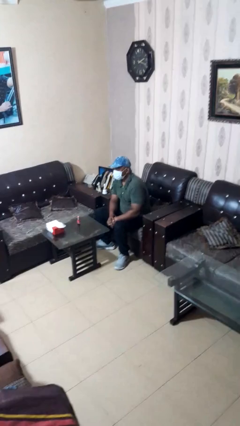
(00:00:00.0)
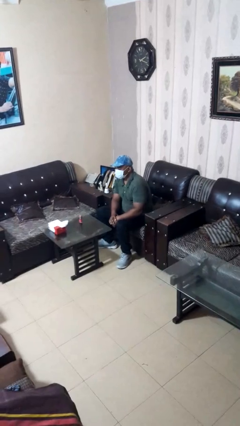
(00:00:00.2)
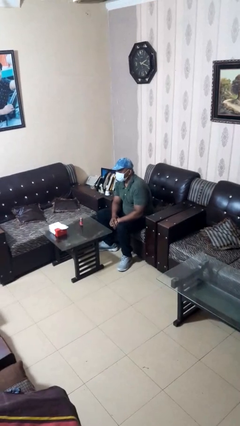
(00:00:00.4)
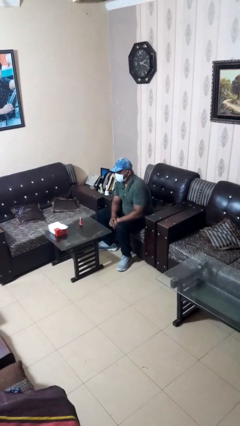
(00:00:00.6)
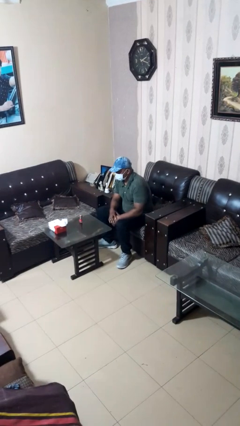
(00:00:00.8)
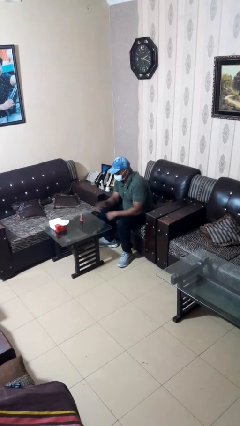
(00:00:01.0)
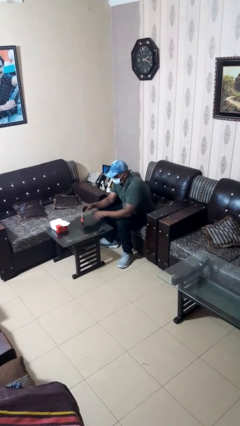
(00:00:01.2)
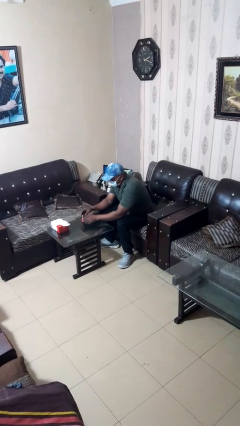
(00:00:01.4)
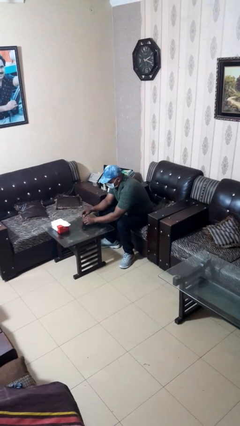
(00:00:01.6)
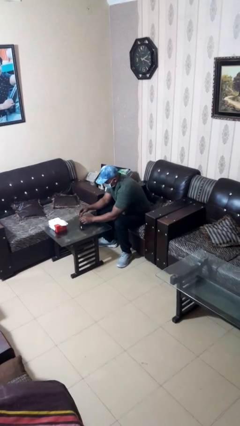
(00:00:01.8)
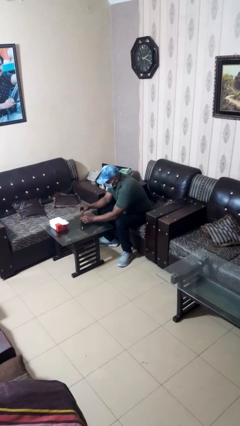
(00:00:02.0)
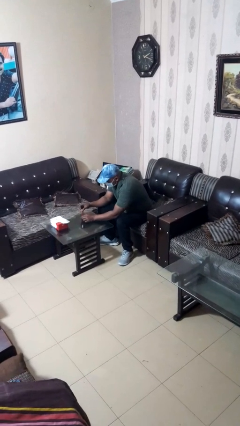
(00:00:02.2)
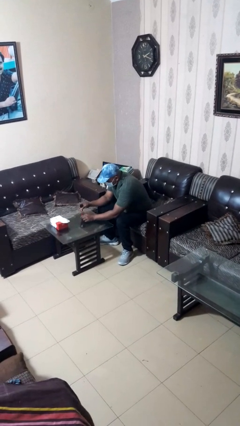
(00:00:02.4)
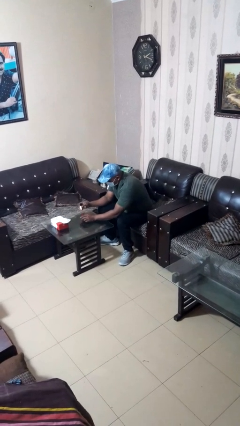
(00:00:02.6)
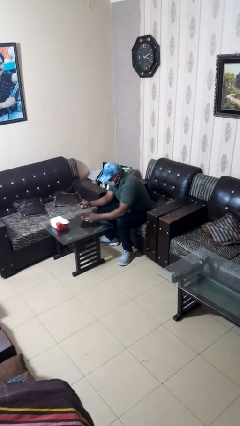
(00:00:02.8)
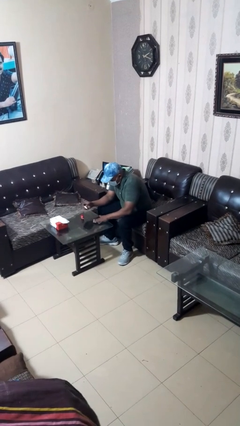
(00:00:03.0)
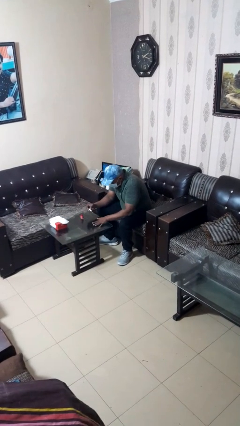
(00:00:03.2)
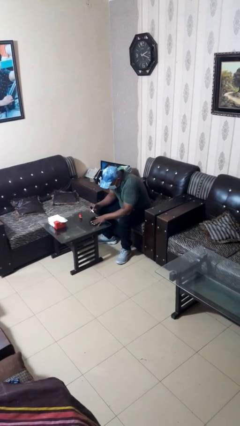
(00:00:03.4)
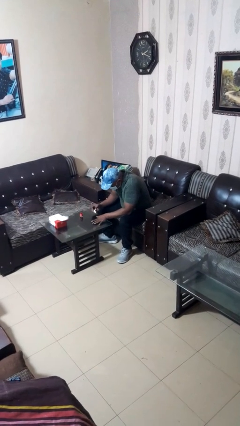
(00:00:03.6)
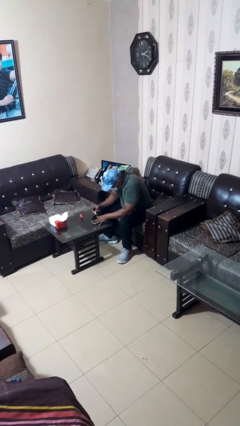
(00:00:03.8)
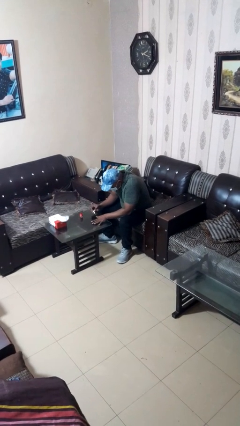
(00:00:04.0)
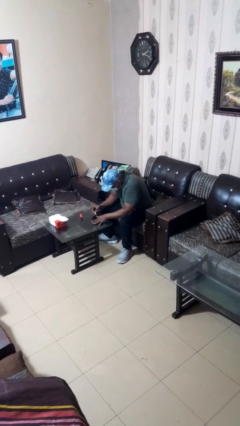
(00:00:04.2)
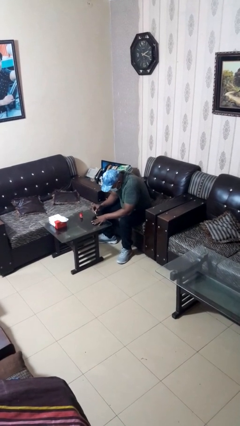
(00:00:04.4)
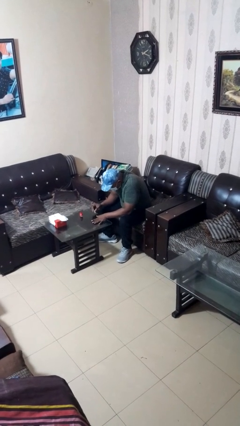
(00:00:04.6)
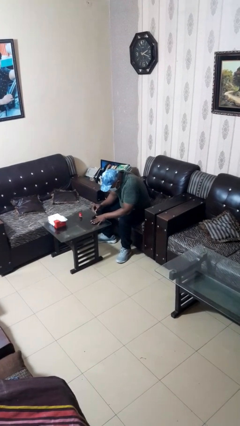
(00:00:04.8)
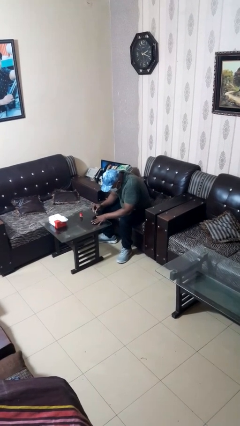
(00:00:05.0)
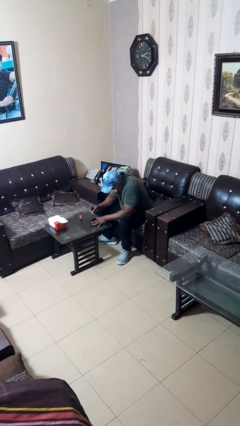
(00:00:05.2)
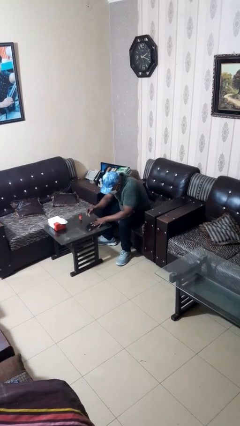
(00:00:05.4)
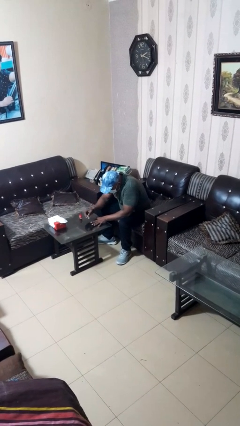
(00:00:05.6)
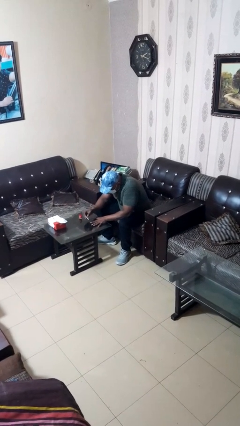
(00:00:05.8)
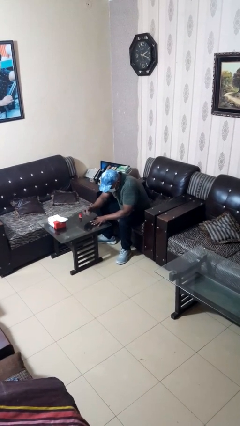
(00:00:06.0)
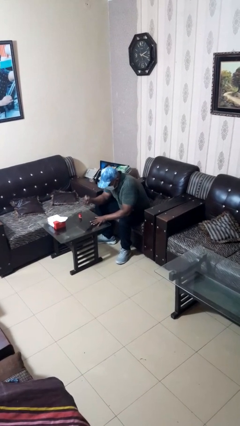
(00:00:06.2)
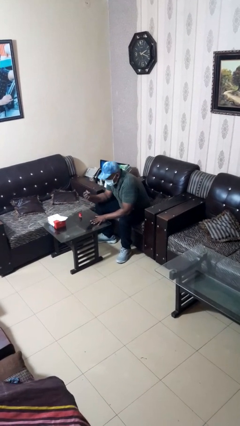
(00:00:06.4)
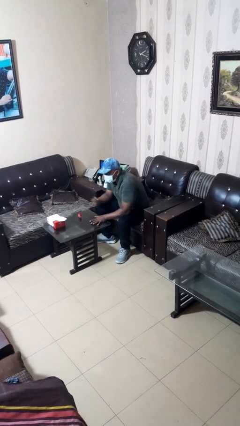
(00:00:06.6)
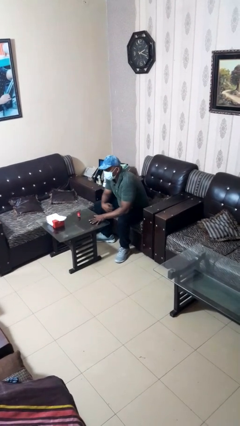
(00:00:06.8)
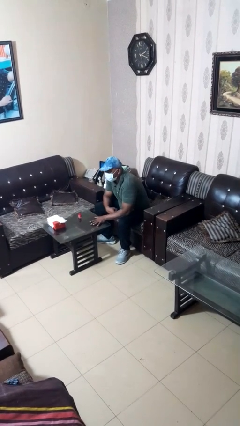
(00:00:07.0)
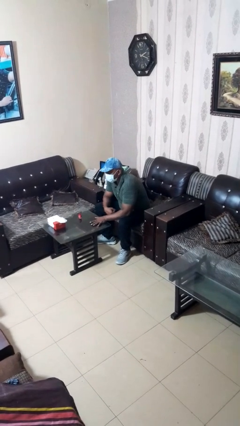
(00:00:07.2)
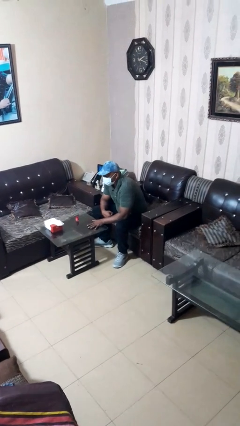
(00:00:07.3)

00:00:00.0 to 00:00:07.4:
person paints fingernails

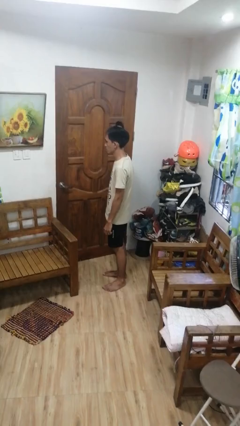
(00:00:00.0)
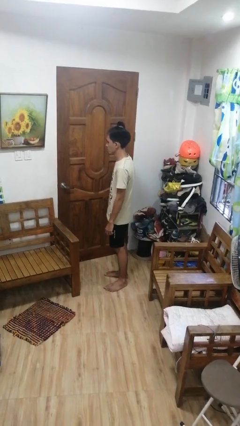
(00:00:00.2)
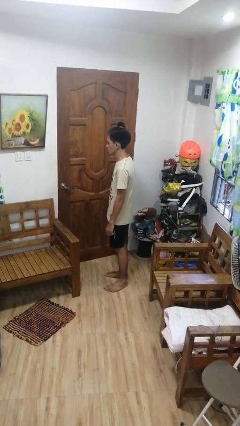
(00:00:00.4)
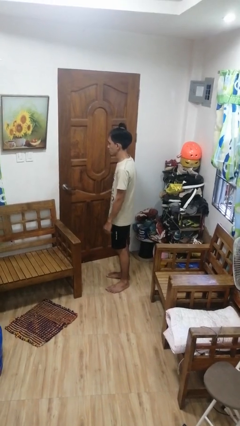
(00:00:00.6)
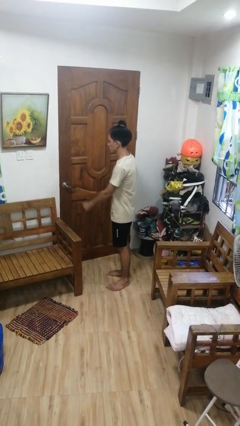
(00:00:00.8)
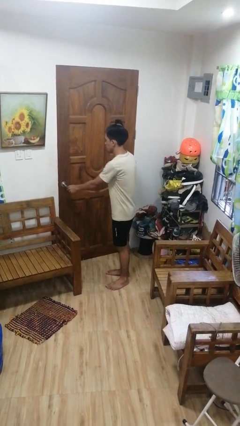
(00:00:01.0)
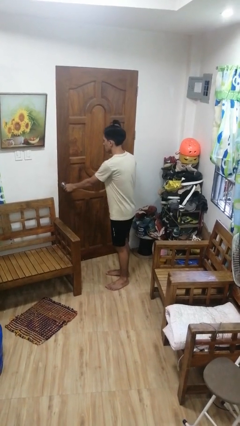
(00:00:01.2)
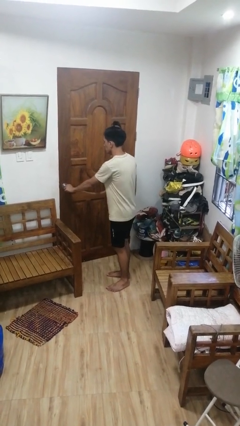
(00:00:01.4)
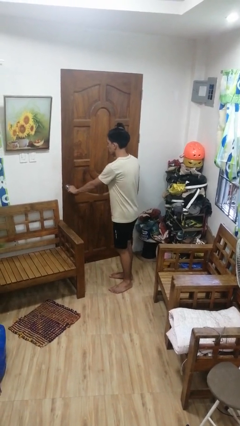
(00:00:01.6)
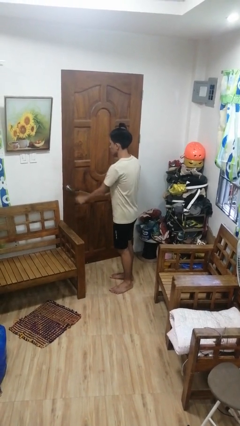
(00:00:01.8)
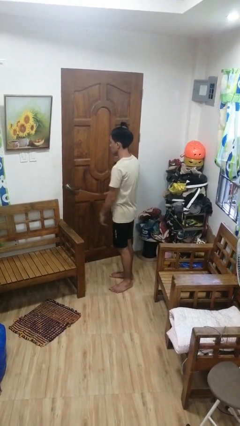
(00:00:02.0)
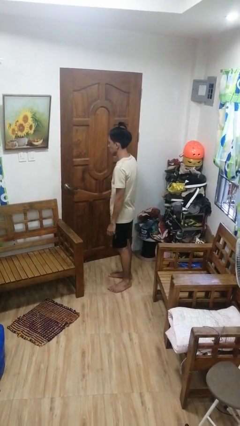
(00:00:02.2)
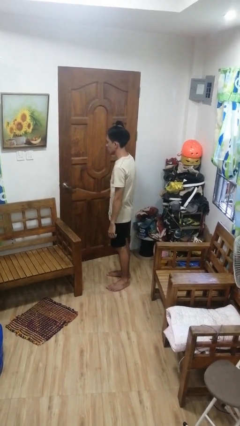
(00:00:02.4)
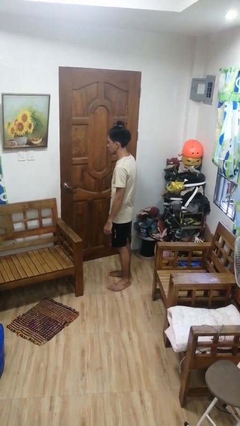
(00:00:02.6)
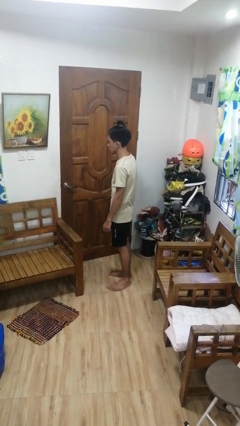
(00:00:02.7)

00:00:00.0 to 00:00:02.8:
person unlocks door with keys

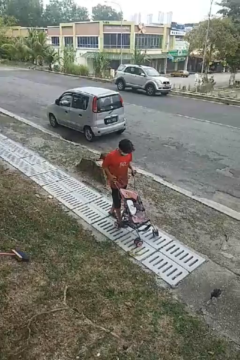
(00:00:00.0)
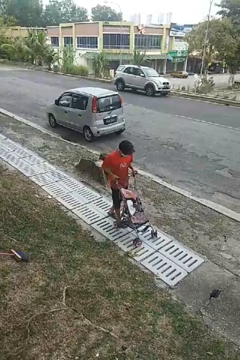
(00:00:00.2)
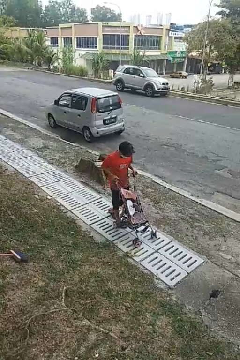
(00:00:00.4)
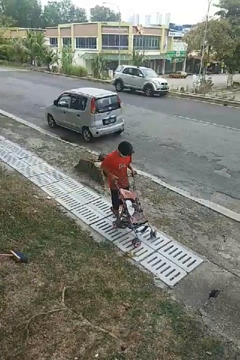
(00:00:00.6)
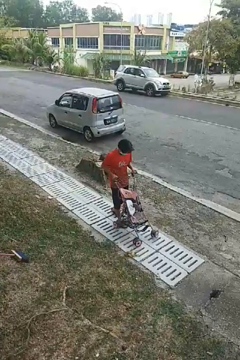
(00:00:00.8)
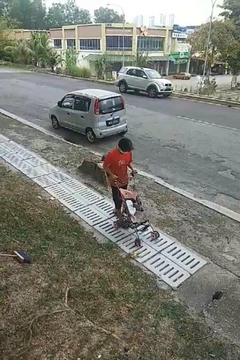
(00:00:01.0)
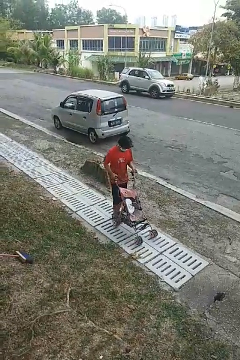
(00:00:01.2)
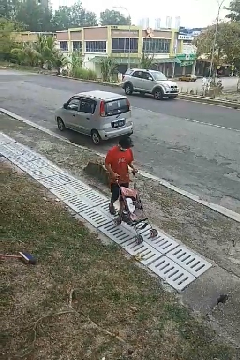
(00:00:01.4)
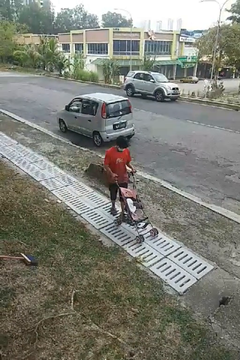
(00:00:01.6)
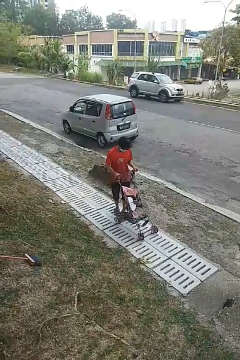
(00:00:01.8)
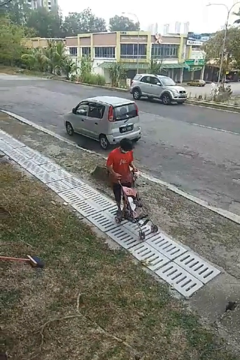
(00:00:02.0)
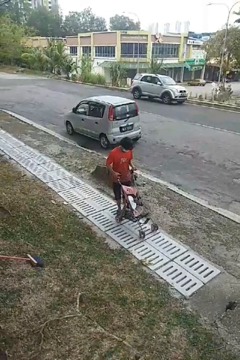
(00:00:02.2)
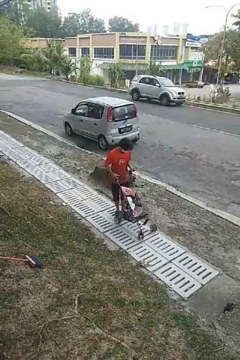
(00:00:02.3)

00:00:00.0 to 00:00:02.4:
person pulls wheeled cart

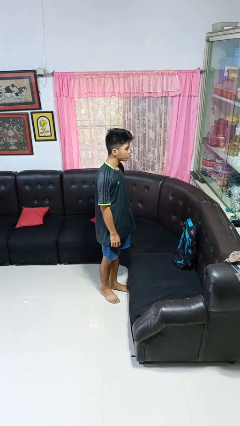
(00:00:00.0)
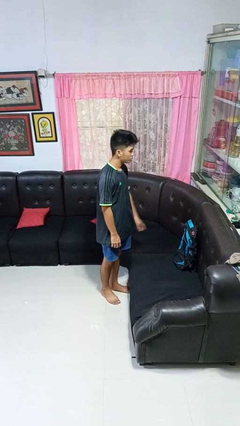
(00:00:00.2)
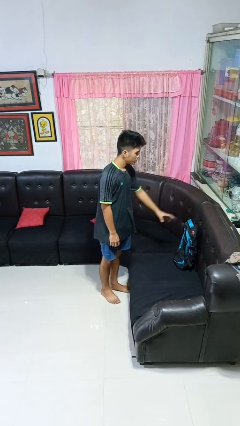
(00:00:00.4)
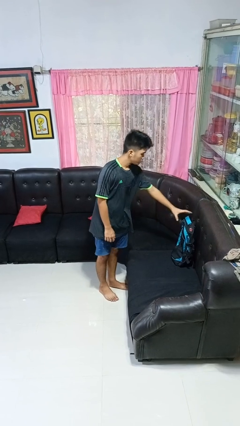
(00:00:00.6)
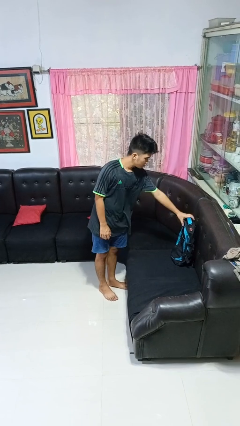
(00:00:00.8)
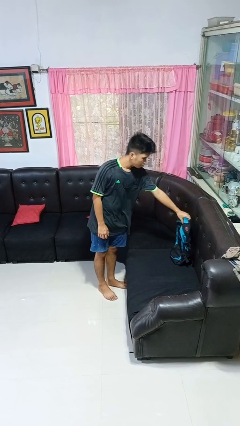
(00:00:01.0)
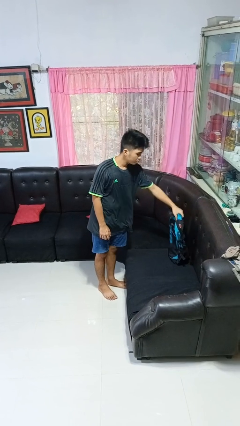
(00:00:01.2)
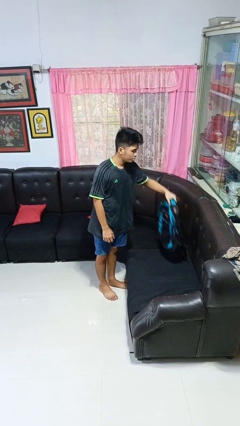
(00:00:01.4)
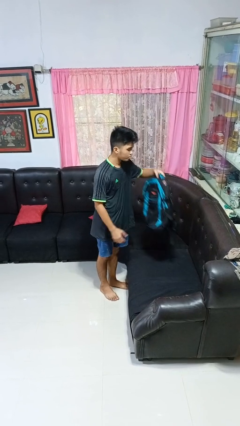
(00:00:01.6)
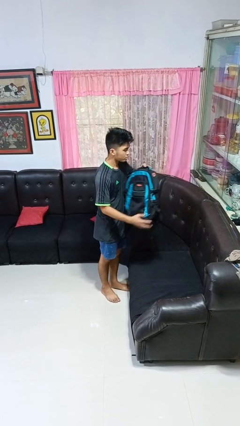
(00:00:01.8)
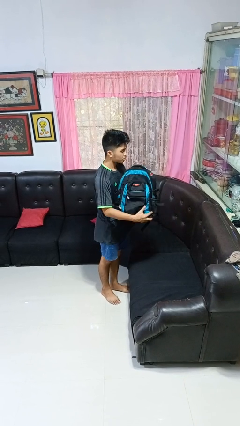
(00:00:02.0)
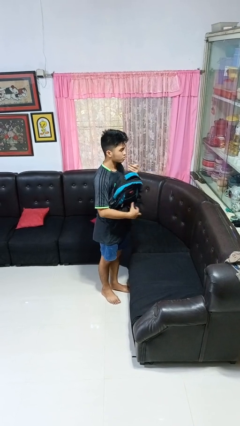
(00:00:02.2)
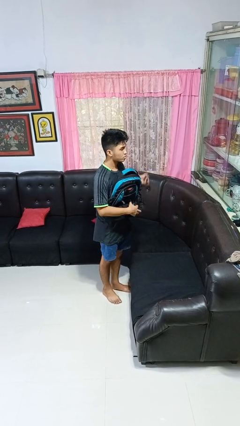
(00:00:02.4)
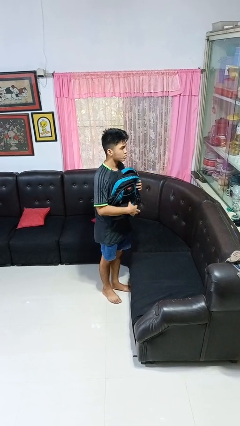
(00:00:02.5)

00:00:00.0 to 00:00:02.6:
person picks up object from couch

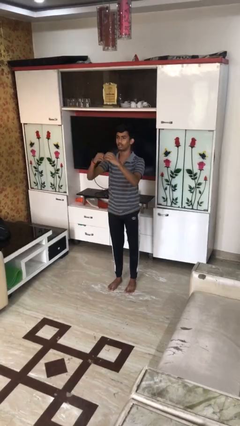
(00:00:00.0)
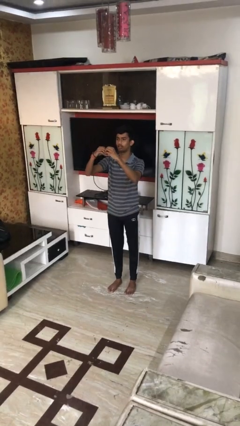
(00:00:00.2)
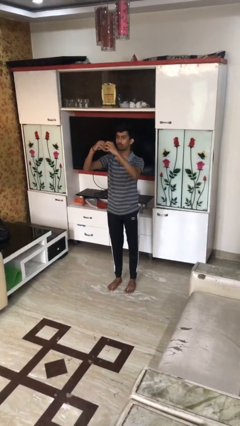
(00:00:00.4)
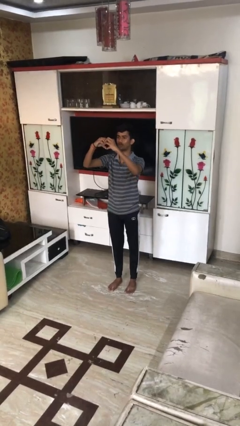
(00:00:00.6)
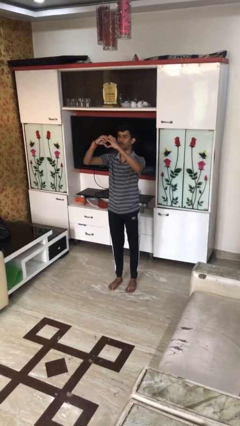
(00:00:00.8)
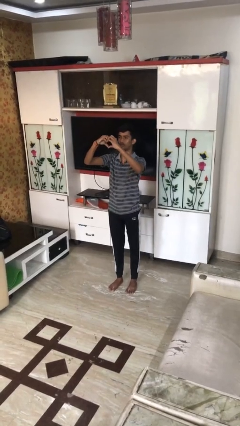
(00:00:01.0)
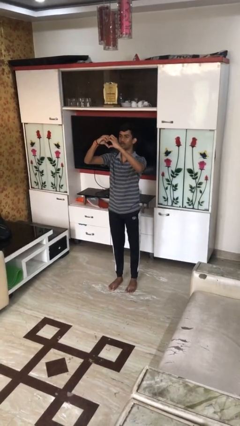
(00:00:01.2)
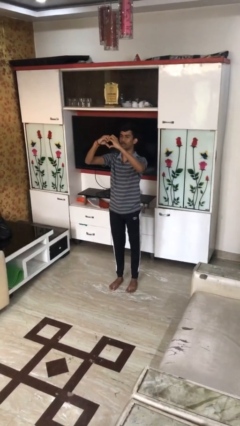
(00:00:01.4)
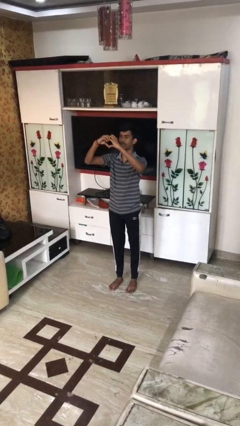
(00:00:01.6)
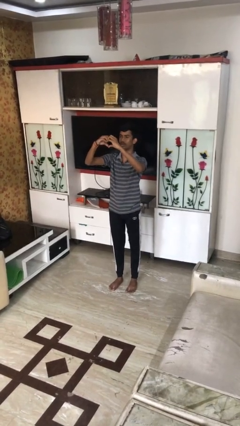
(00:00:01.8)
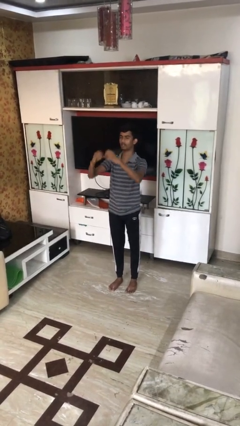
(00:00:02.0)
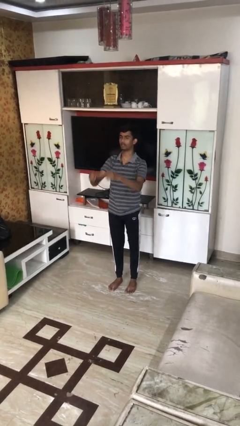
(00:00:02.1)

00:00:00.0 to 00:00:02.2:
person gestures heart

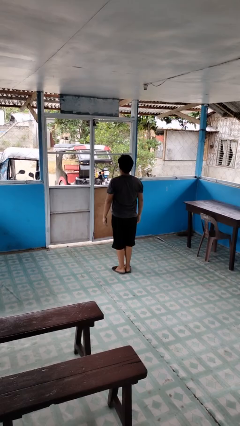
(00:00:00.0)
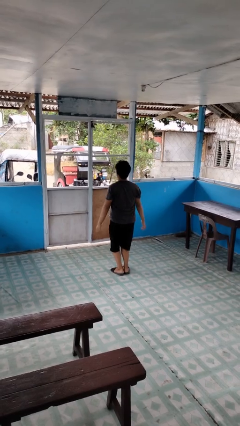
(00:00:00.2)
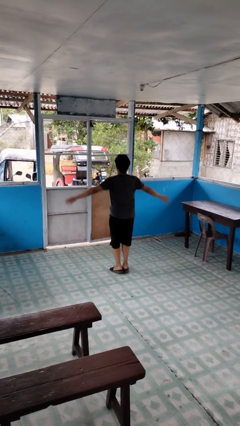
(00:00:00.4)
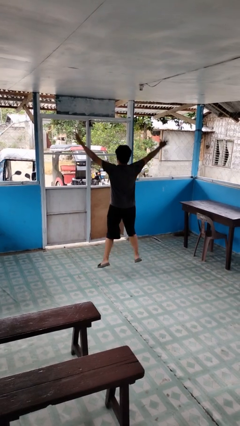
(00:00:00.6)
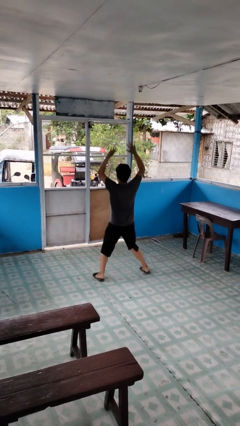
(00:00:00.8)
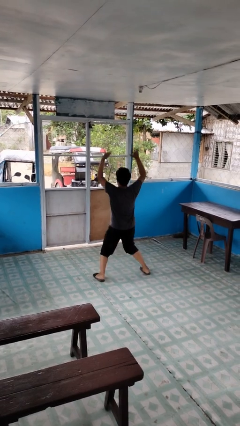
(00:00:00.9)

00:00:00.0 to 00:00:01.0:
person exercises with jumping jacks
